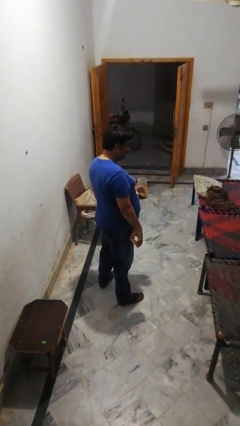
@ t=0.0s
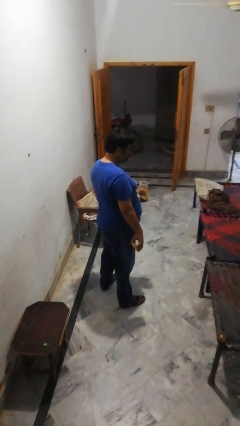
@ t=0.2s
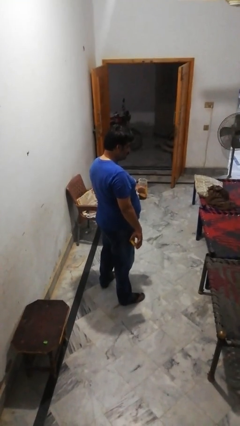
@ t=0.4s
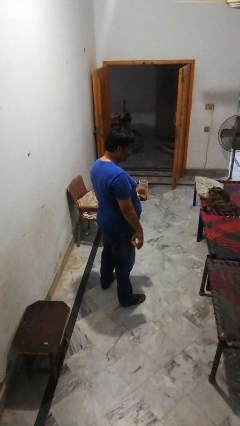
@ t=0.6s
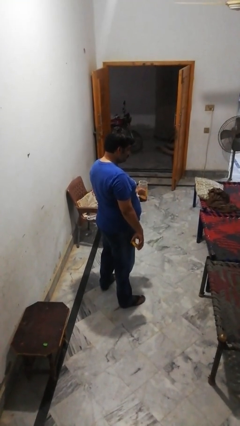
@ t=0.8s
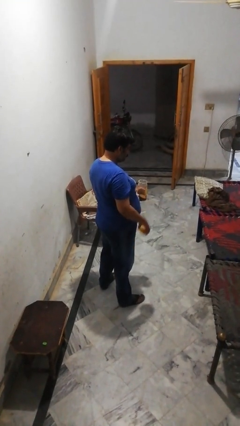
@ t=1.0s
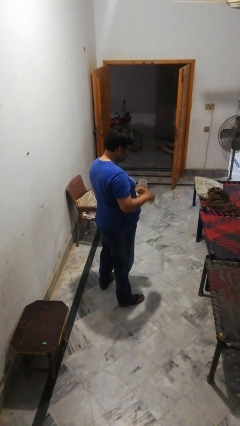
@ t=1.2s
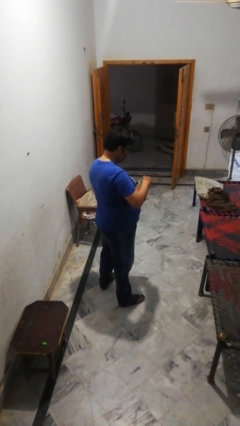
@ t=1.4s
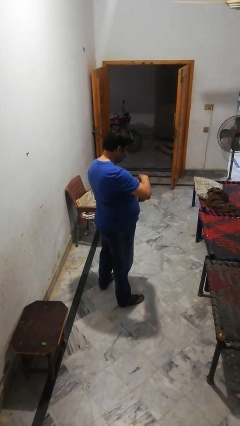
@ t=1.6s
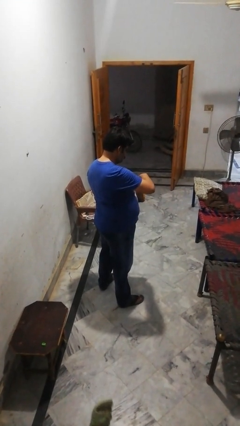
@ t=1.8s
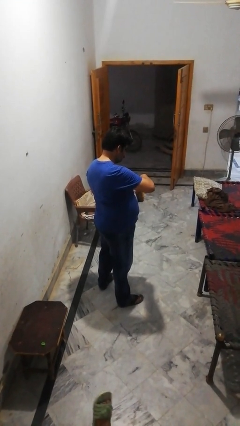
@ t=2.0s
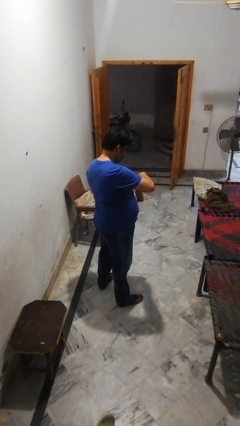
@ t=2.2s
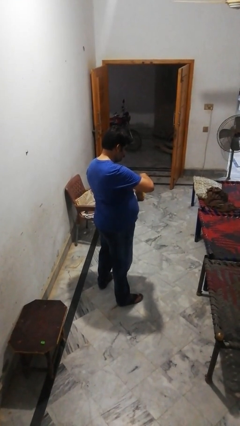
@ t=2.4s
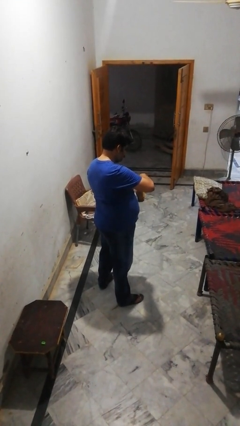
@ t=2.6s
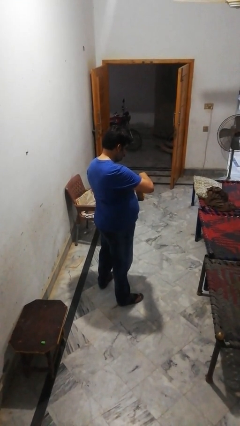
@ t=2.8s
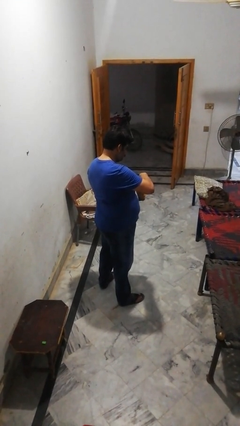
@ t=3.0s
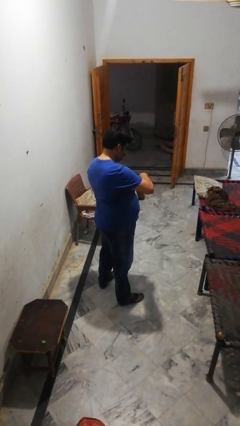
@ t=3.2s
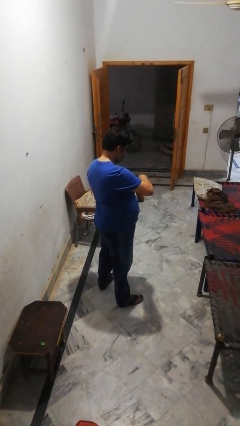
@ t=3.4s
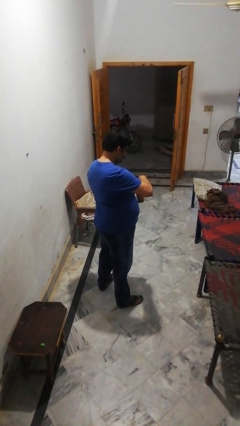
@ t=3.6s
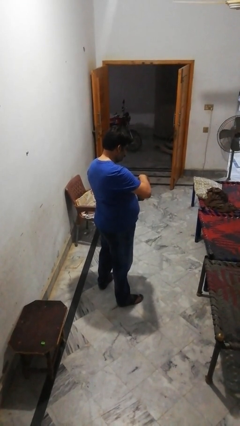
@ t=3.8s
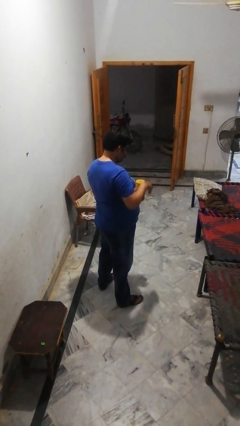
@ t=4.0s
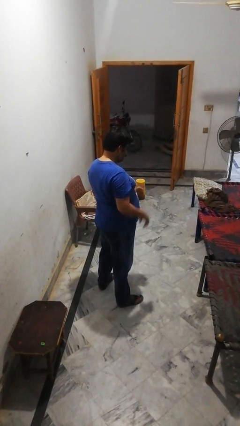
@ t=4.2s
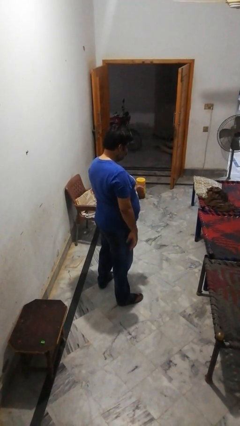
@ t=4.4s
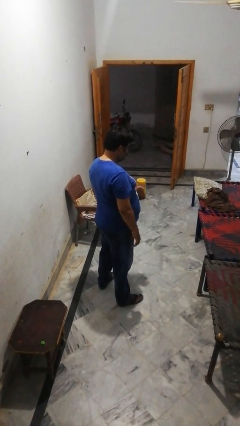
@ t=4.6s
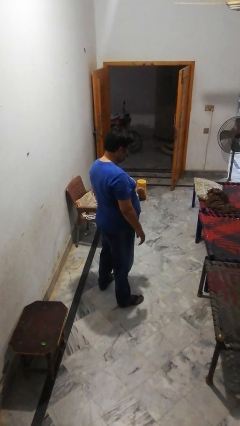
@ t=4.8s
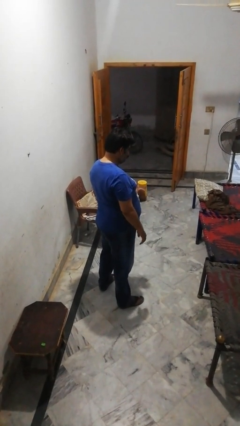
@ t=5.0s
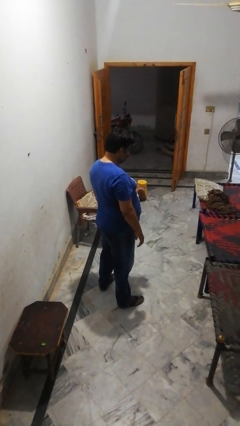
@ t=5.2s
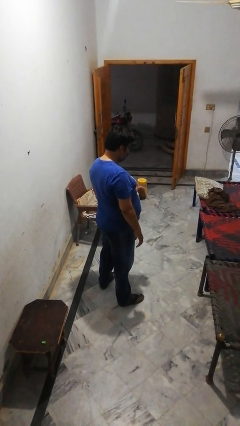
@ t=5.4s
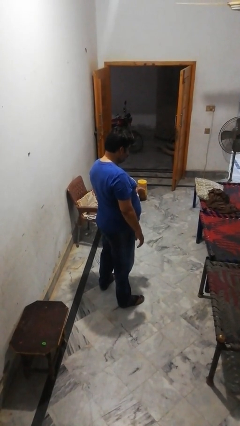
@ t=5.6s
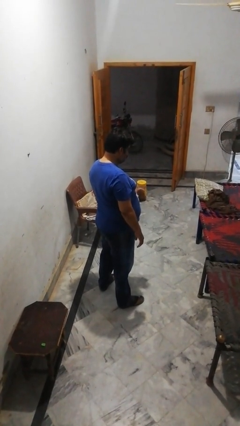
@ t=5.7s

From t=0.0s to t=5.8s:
person closes jar

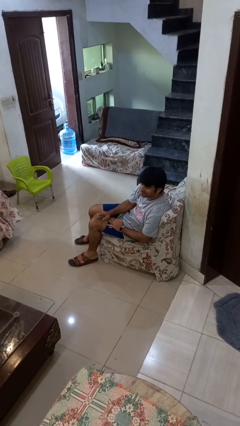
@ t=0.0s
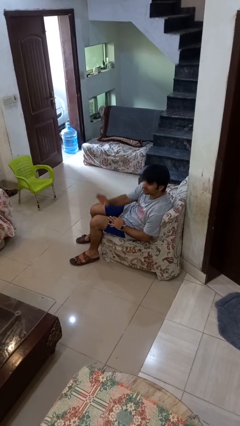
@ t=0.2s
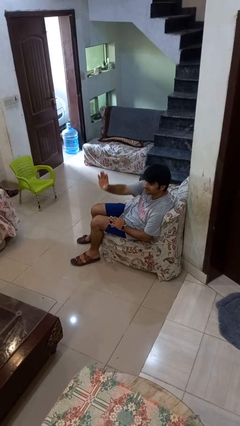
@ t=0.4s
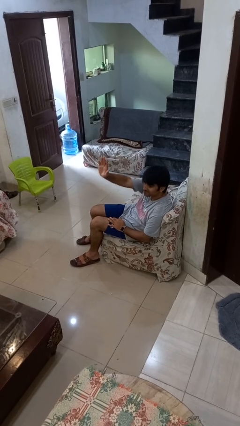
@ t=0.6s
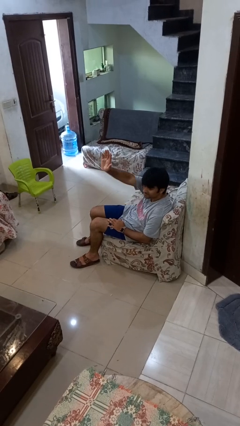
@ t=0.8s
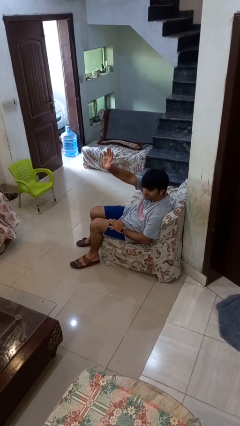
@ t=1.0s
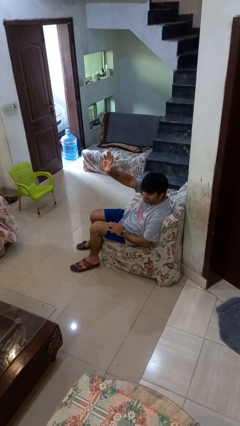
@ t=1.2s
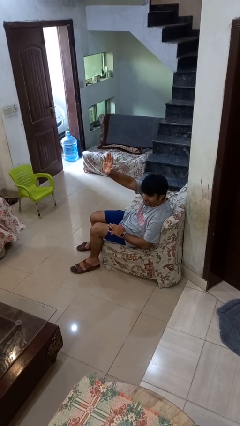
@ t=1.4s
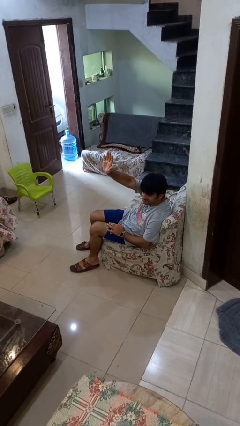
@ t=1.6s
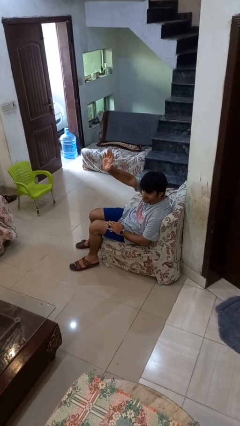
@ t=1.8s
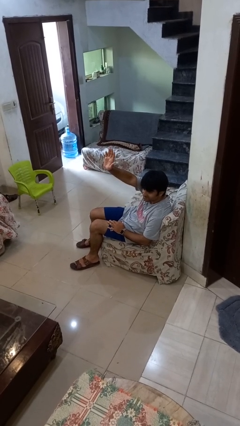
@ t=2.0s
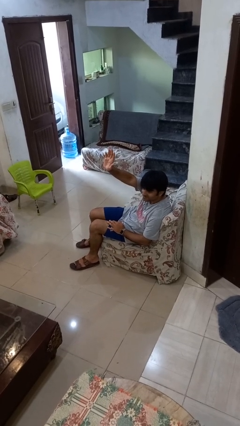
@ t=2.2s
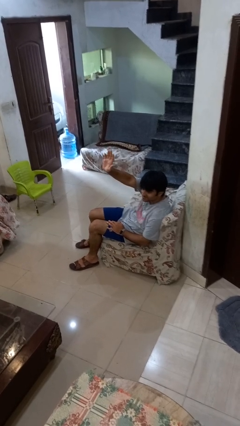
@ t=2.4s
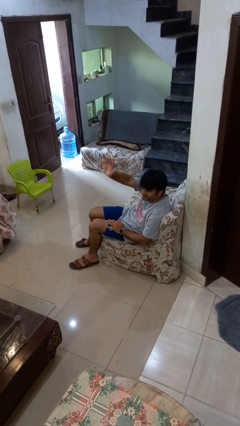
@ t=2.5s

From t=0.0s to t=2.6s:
person gestures raise hand

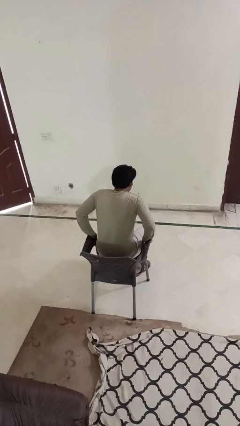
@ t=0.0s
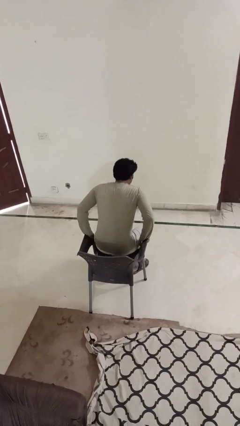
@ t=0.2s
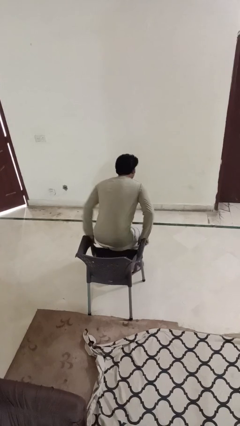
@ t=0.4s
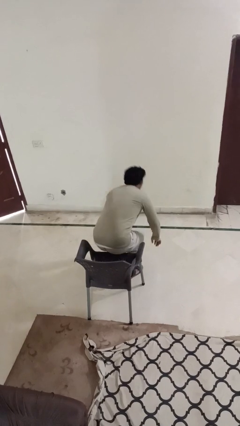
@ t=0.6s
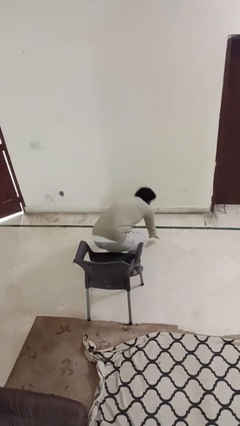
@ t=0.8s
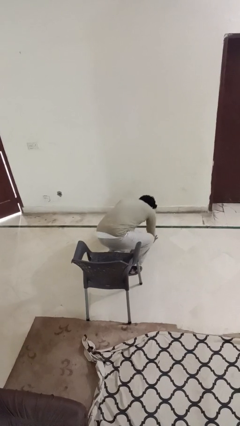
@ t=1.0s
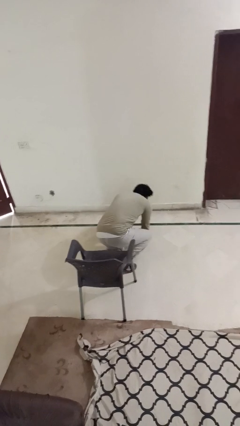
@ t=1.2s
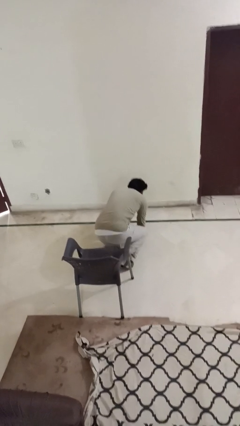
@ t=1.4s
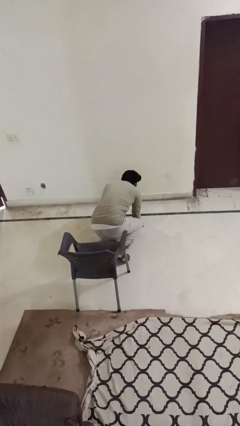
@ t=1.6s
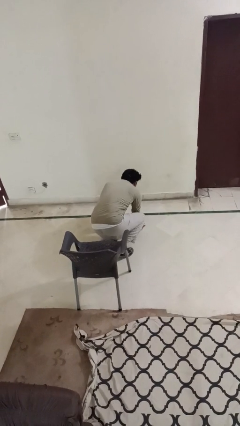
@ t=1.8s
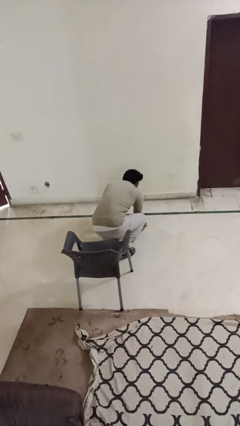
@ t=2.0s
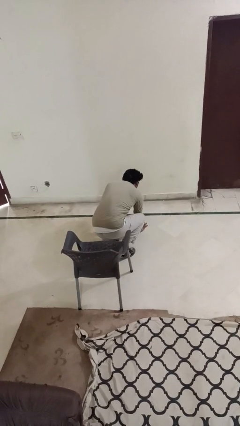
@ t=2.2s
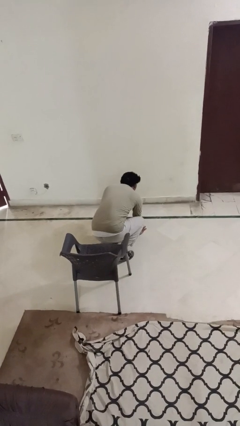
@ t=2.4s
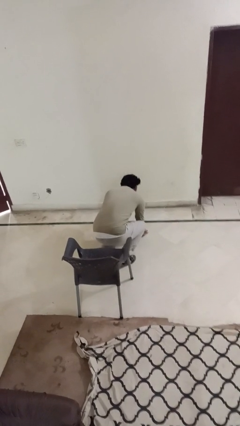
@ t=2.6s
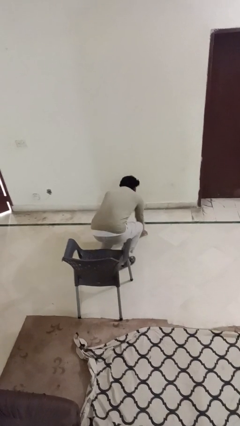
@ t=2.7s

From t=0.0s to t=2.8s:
person falls from chair

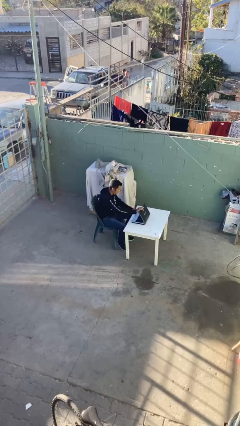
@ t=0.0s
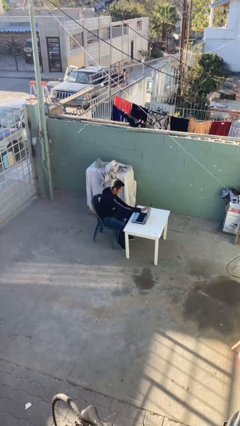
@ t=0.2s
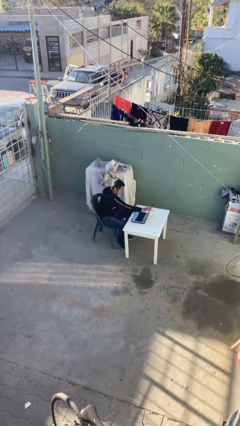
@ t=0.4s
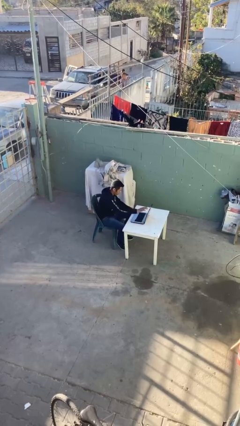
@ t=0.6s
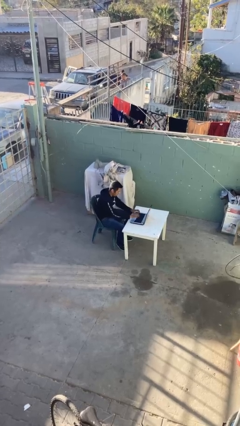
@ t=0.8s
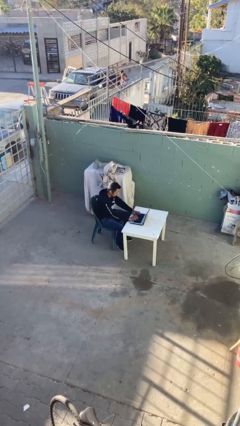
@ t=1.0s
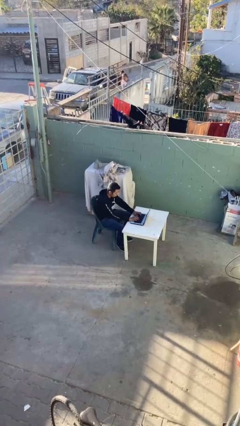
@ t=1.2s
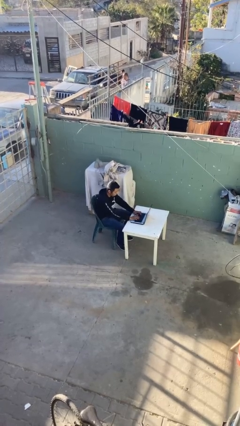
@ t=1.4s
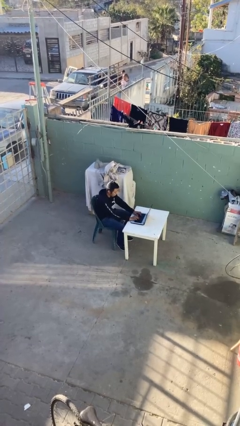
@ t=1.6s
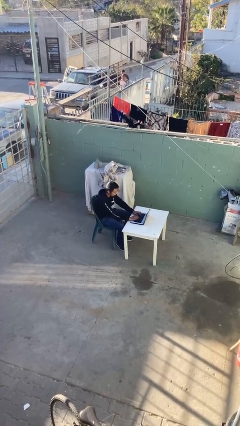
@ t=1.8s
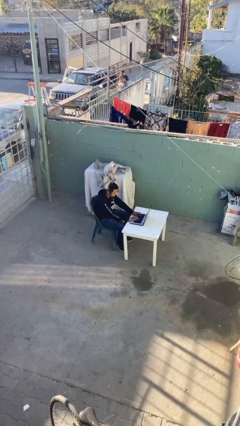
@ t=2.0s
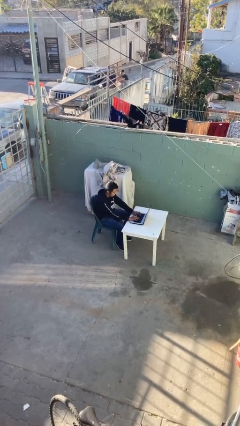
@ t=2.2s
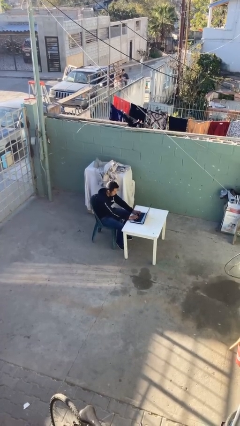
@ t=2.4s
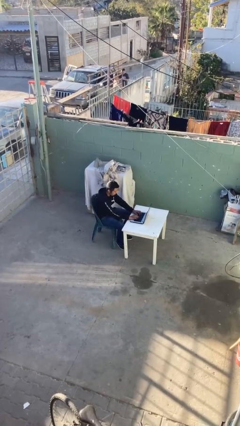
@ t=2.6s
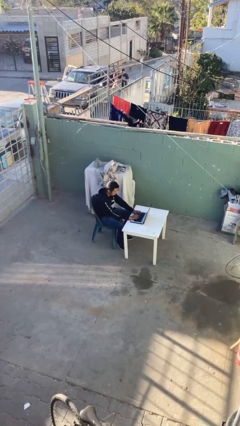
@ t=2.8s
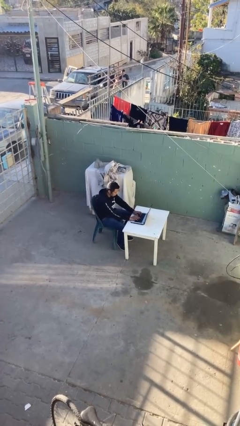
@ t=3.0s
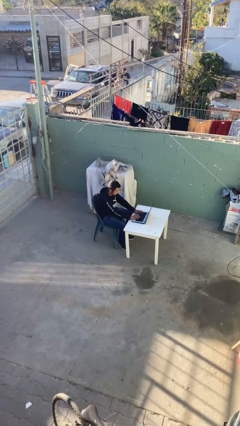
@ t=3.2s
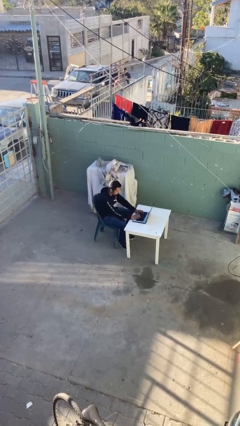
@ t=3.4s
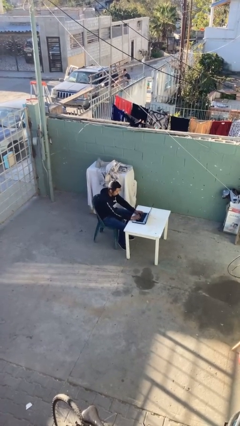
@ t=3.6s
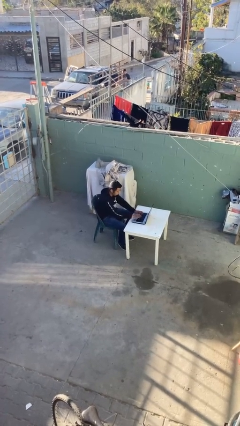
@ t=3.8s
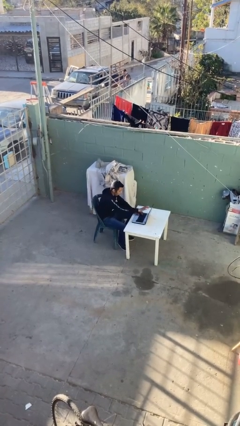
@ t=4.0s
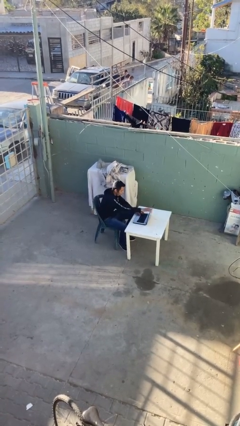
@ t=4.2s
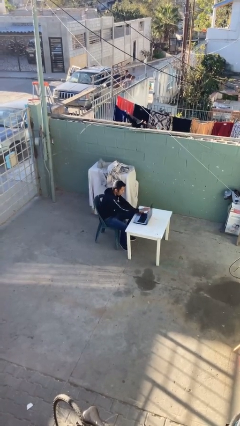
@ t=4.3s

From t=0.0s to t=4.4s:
person interacts with laptop

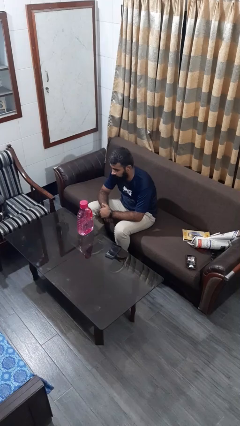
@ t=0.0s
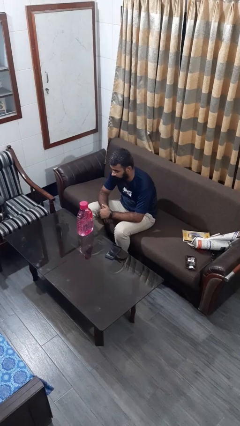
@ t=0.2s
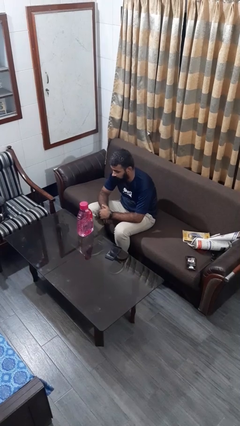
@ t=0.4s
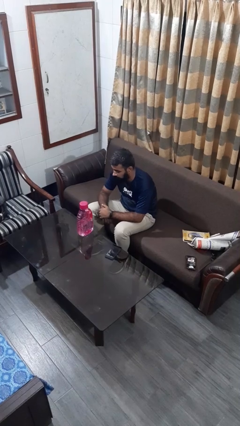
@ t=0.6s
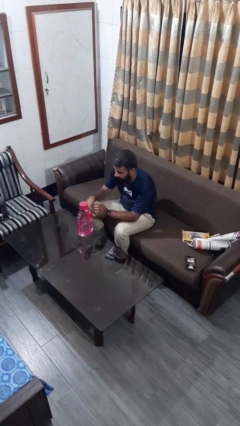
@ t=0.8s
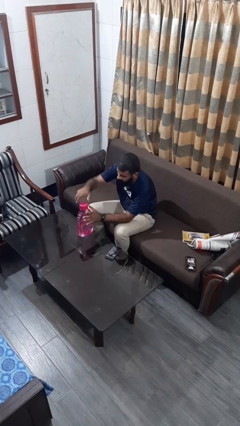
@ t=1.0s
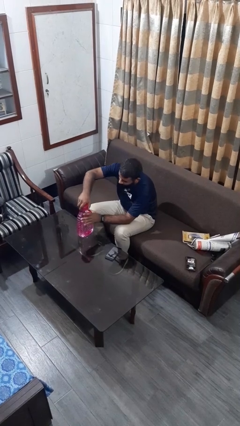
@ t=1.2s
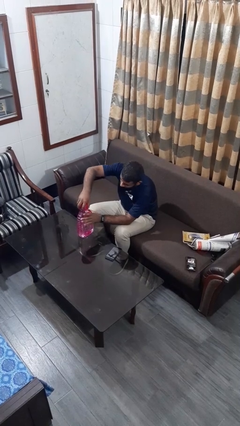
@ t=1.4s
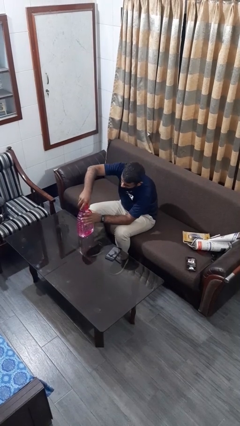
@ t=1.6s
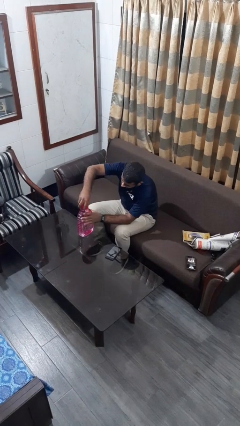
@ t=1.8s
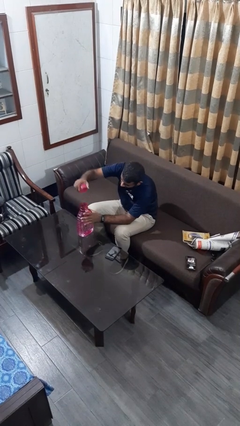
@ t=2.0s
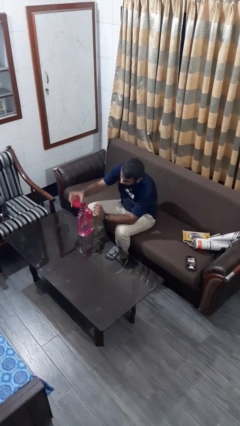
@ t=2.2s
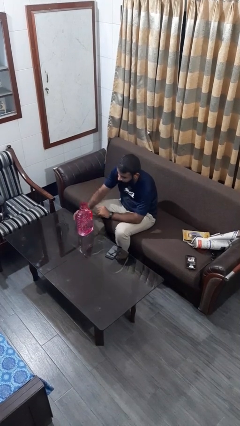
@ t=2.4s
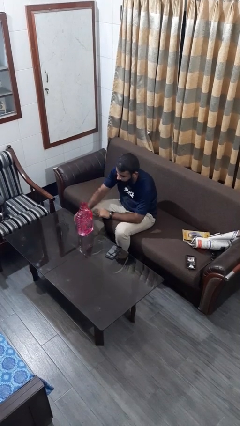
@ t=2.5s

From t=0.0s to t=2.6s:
person unscrews lid from bottle
